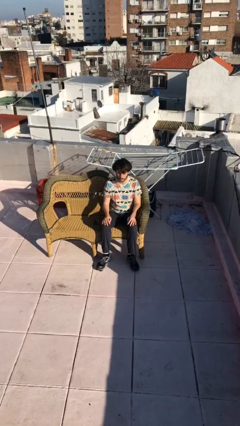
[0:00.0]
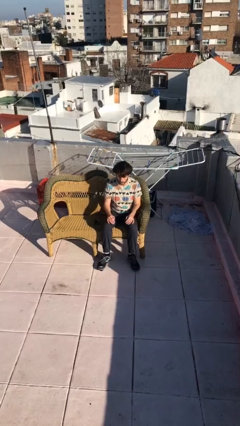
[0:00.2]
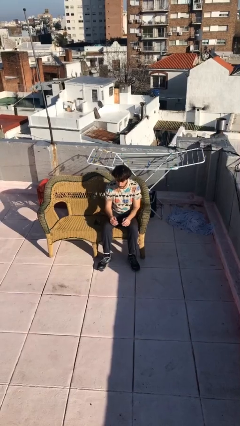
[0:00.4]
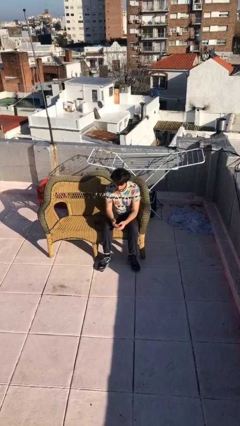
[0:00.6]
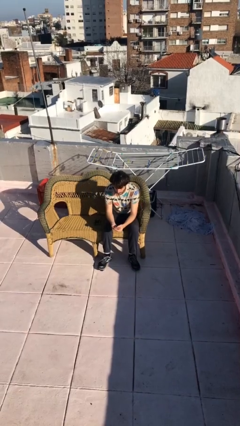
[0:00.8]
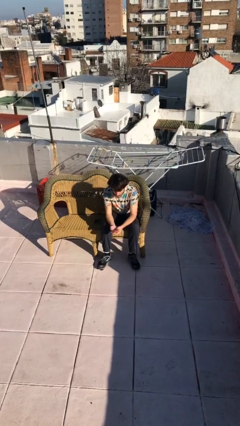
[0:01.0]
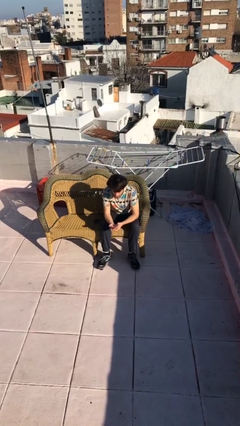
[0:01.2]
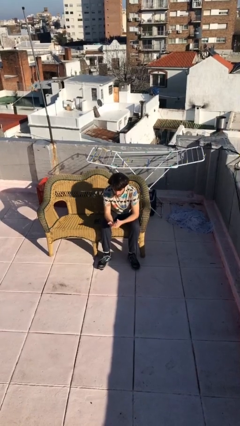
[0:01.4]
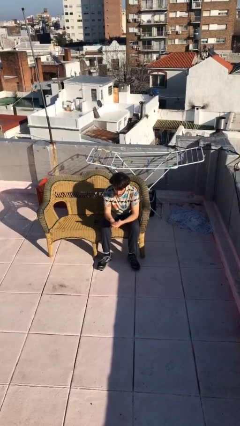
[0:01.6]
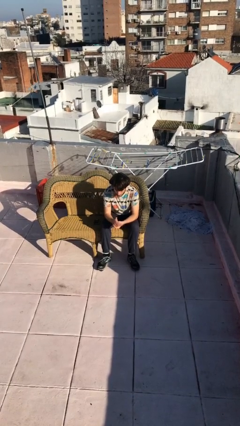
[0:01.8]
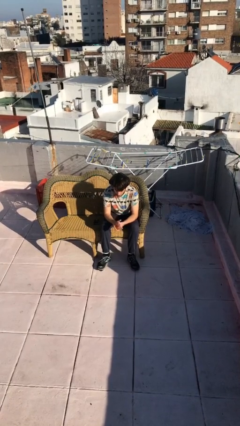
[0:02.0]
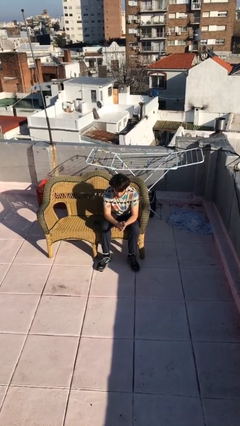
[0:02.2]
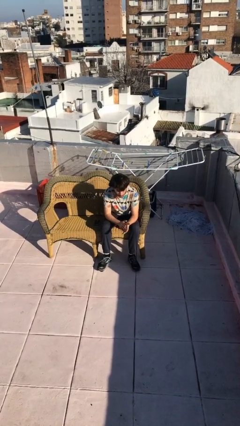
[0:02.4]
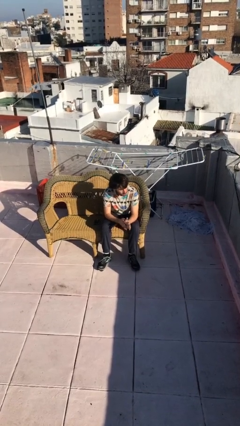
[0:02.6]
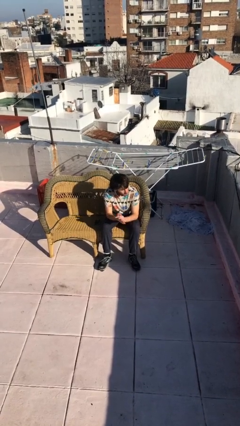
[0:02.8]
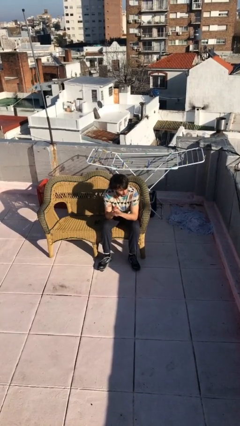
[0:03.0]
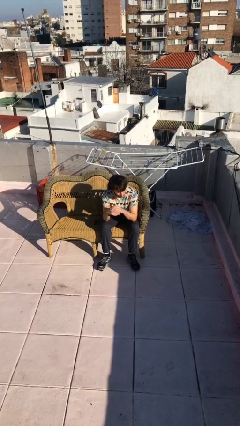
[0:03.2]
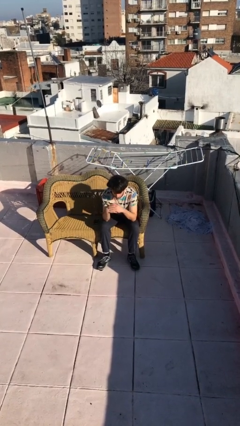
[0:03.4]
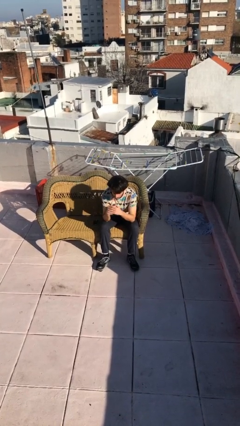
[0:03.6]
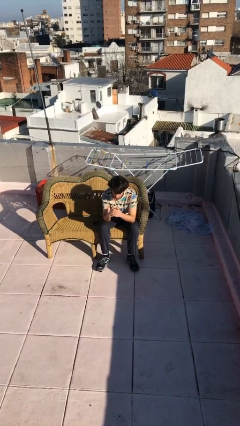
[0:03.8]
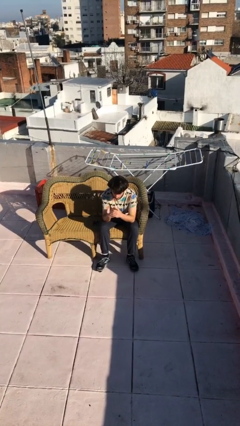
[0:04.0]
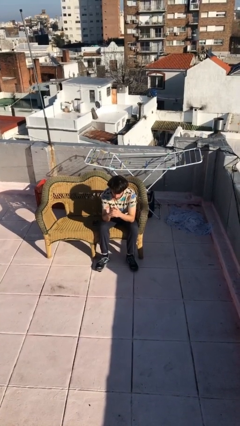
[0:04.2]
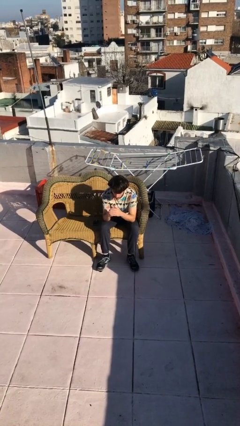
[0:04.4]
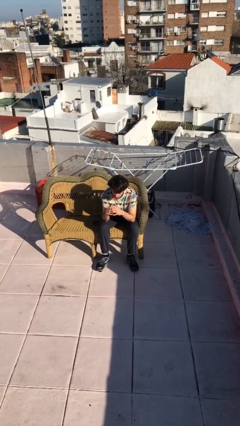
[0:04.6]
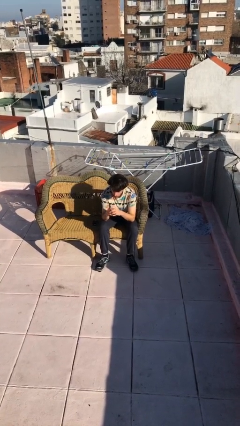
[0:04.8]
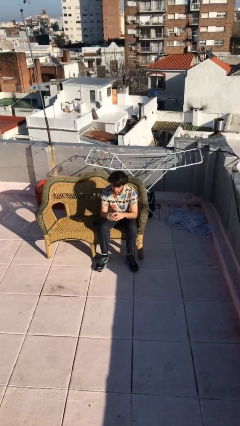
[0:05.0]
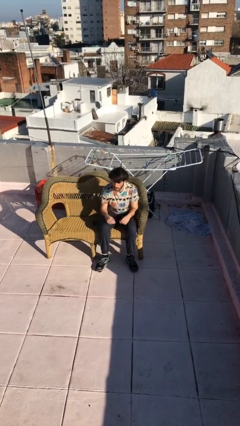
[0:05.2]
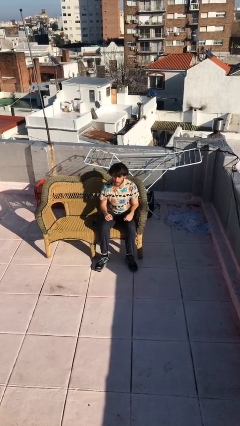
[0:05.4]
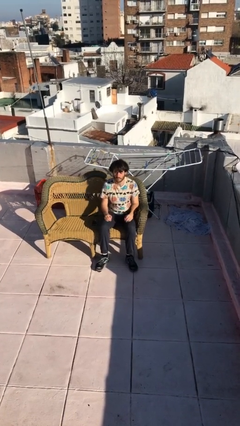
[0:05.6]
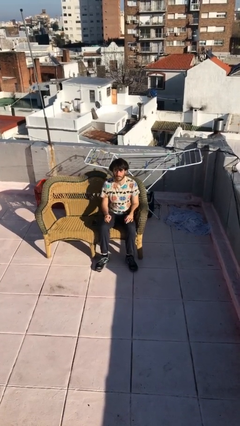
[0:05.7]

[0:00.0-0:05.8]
person looks at hands in lap

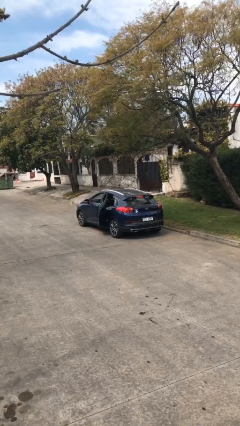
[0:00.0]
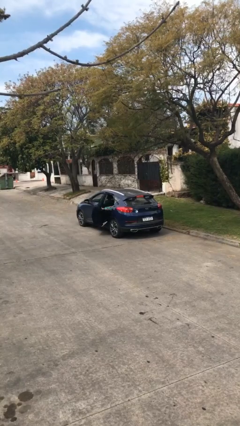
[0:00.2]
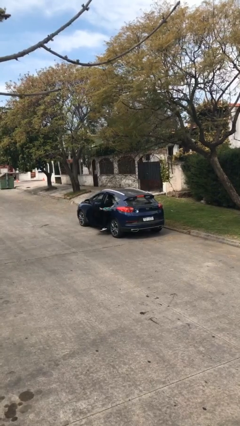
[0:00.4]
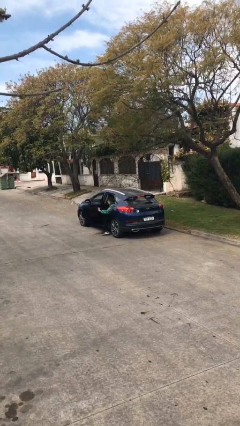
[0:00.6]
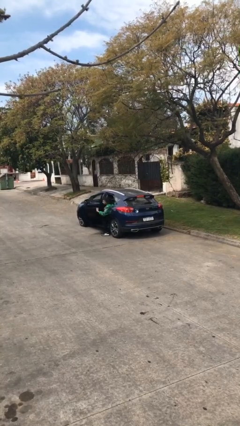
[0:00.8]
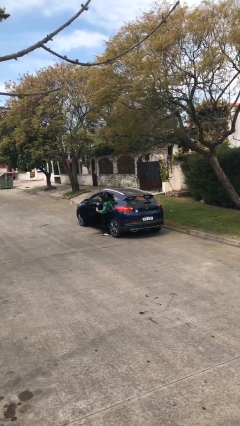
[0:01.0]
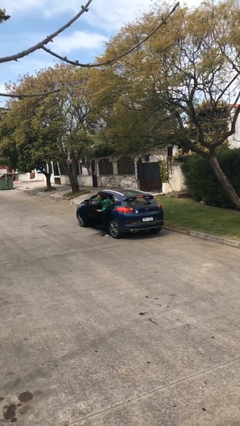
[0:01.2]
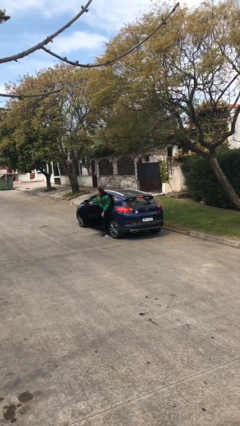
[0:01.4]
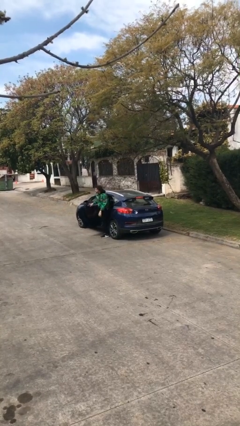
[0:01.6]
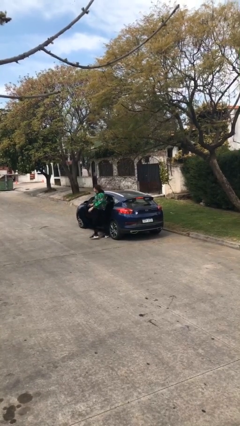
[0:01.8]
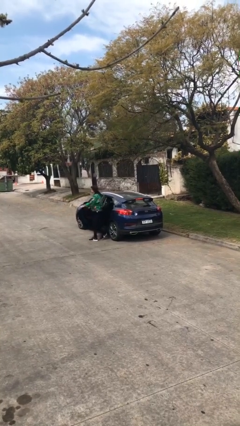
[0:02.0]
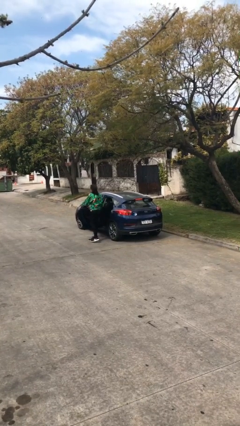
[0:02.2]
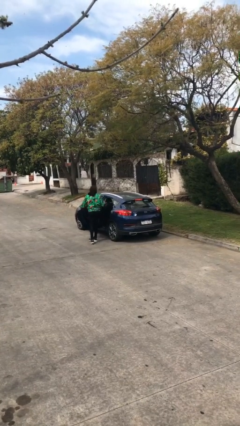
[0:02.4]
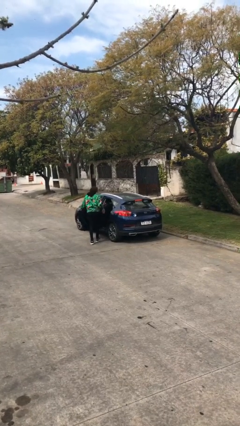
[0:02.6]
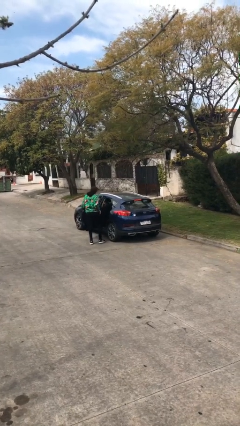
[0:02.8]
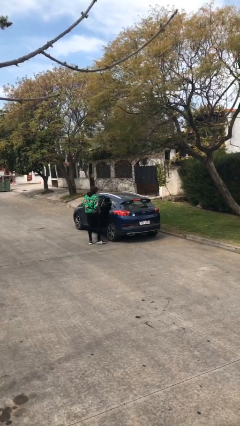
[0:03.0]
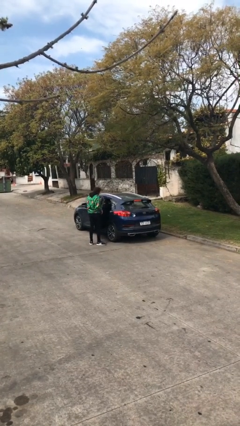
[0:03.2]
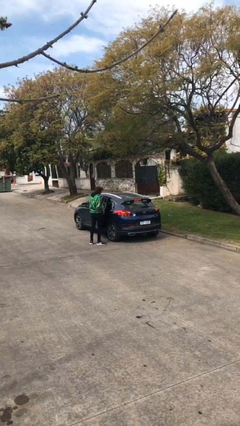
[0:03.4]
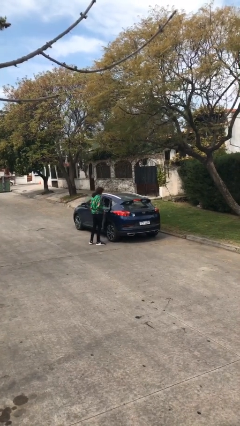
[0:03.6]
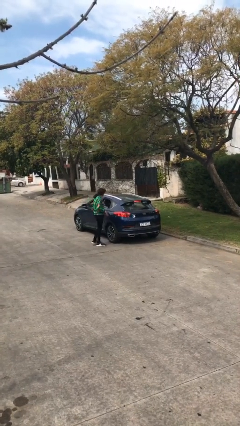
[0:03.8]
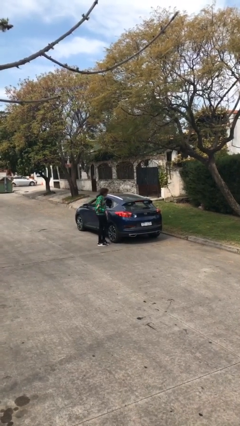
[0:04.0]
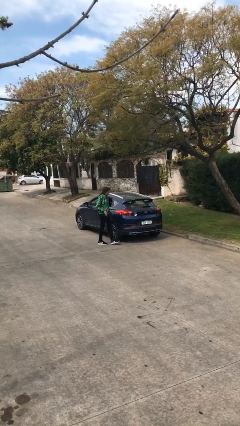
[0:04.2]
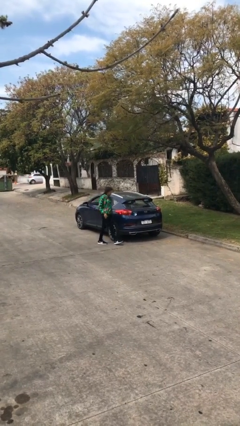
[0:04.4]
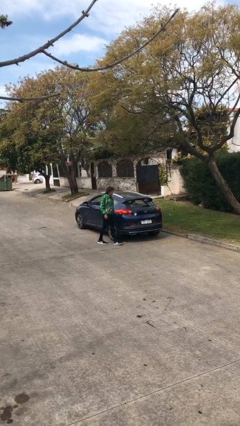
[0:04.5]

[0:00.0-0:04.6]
car drops off person

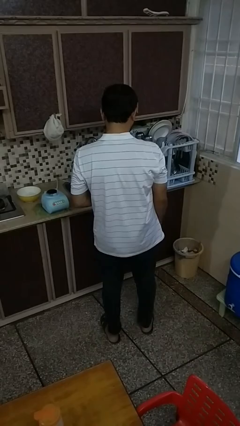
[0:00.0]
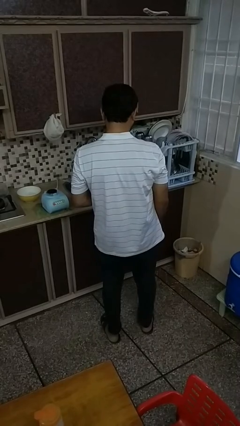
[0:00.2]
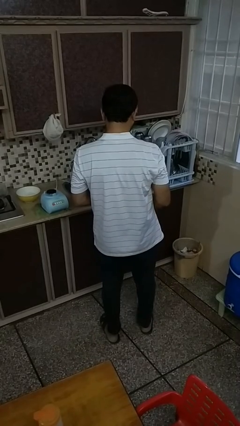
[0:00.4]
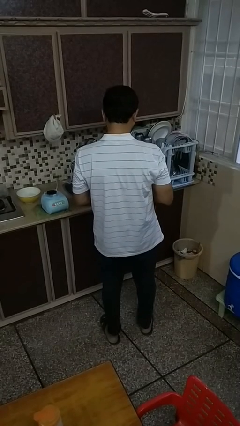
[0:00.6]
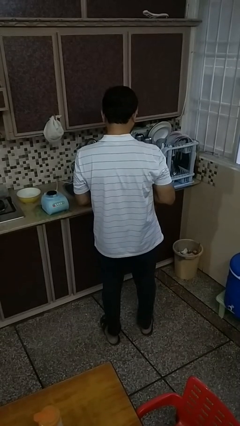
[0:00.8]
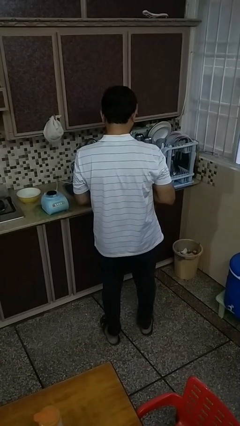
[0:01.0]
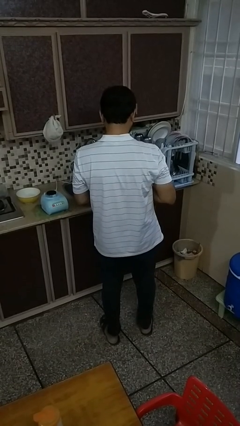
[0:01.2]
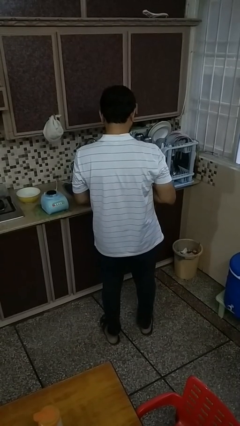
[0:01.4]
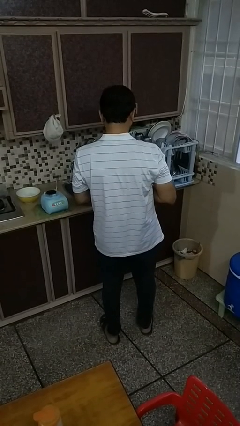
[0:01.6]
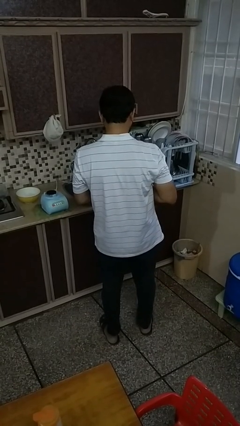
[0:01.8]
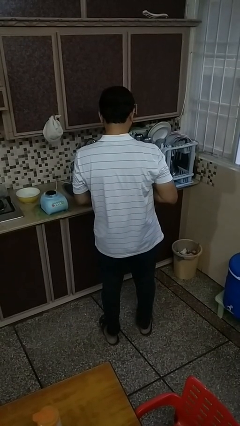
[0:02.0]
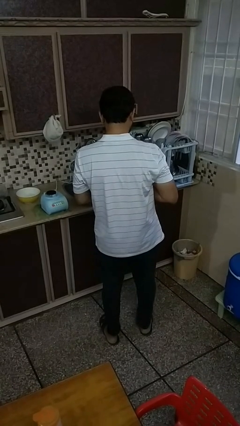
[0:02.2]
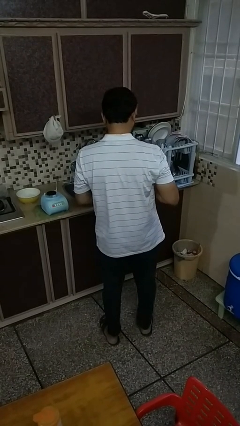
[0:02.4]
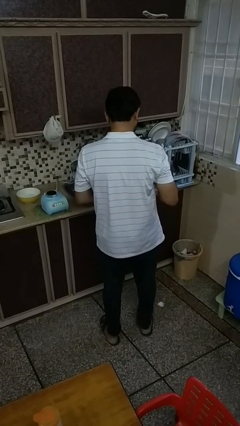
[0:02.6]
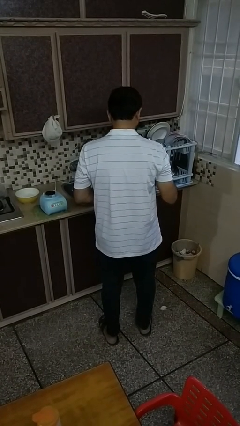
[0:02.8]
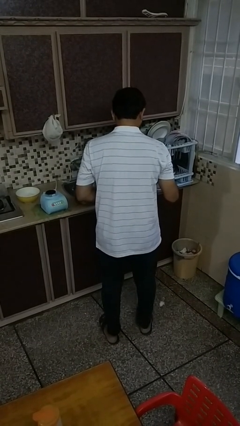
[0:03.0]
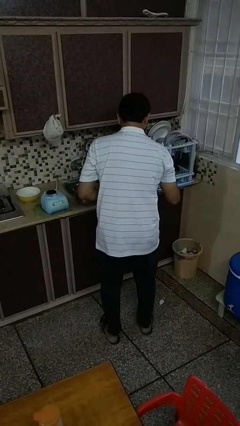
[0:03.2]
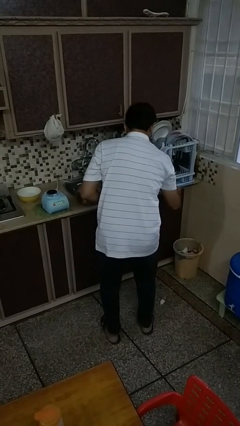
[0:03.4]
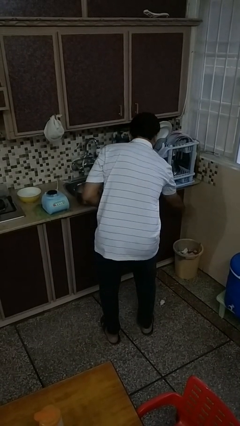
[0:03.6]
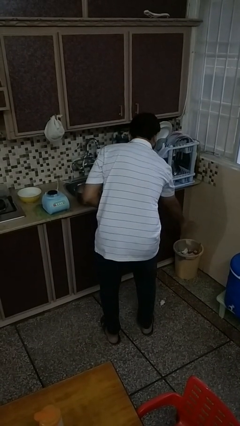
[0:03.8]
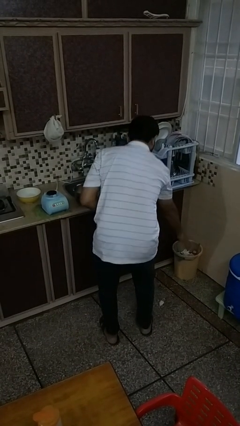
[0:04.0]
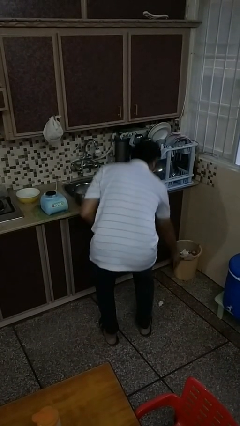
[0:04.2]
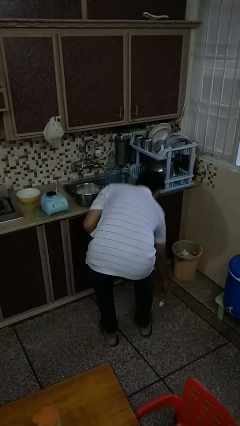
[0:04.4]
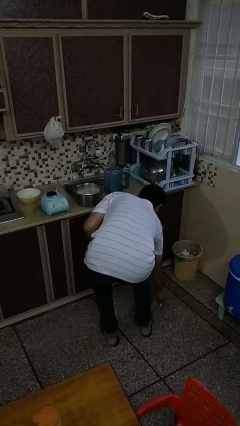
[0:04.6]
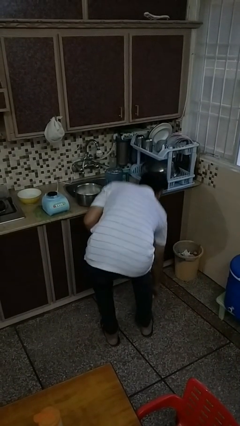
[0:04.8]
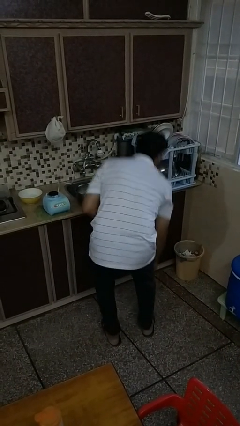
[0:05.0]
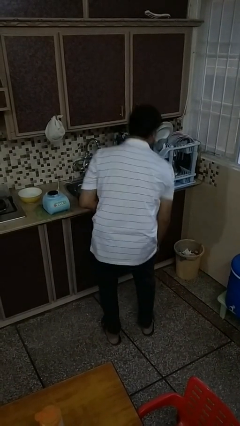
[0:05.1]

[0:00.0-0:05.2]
person discards trash

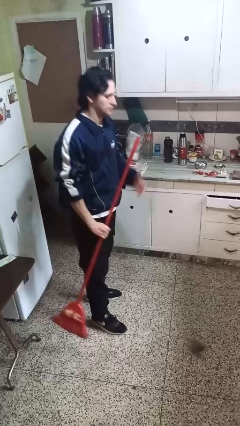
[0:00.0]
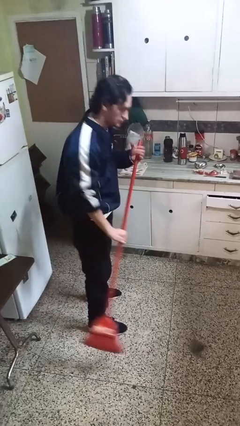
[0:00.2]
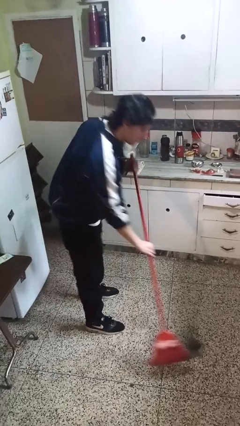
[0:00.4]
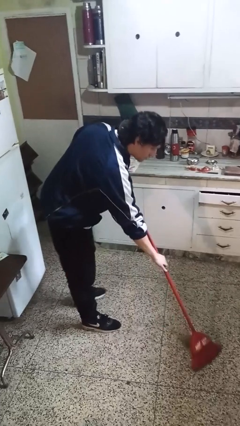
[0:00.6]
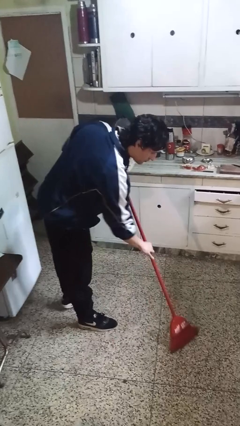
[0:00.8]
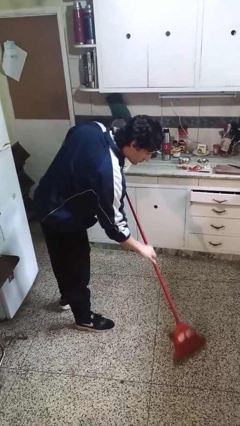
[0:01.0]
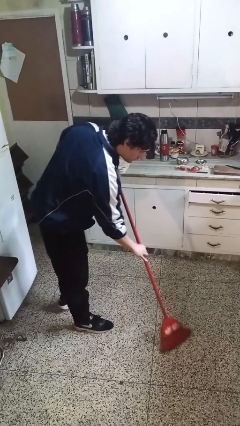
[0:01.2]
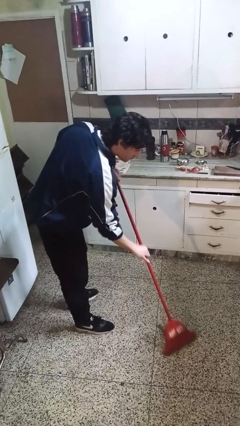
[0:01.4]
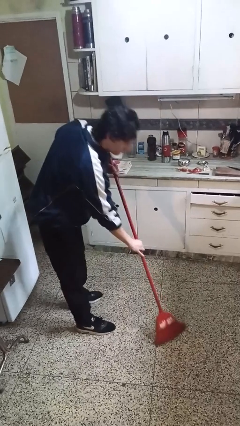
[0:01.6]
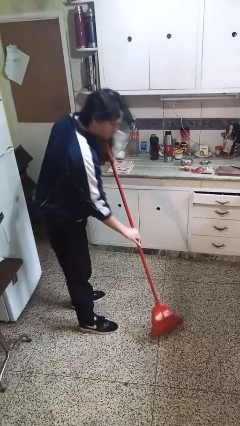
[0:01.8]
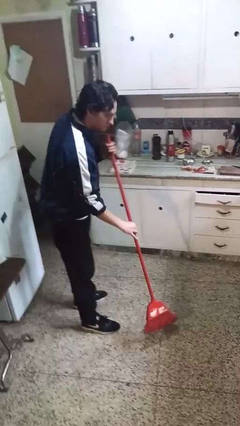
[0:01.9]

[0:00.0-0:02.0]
person sweeps floor
